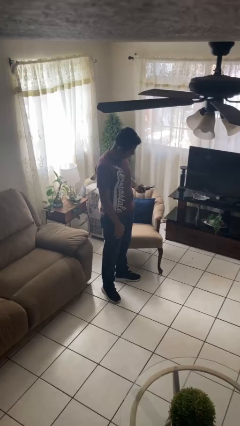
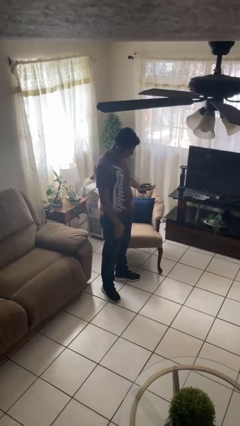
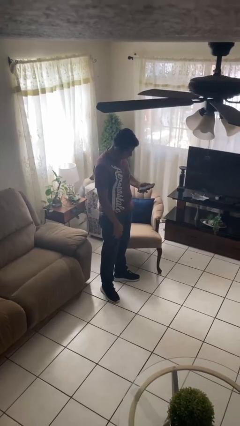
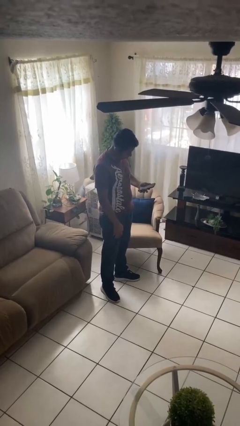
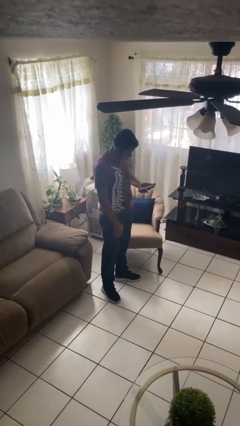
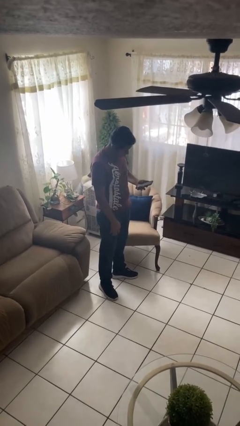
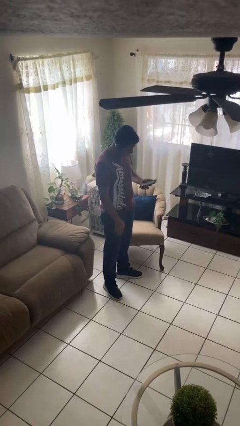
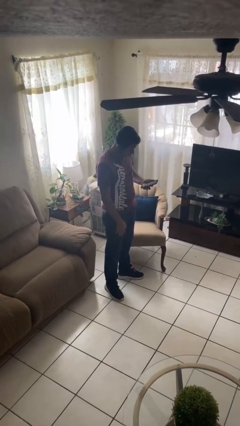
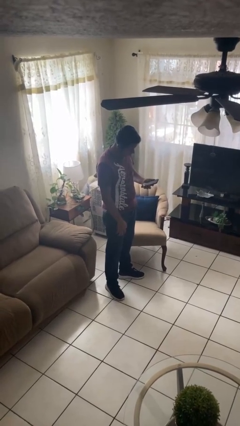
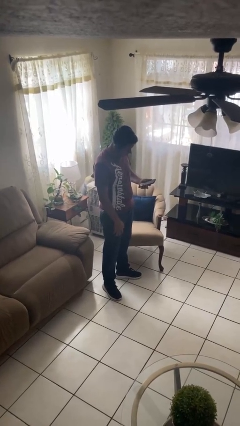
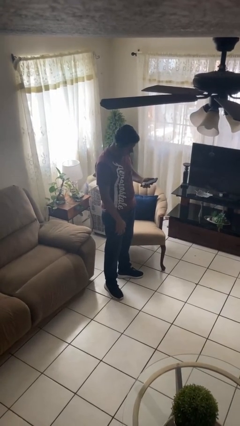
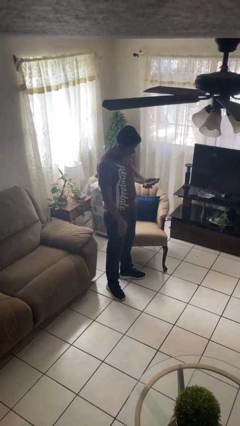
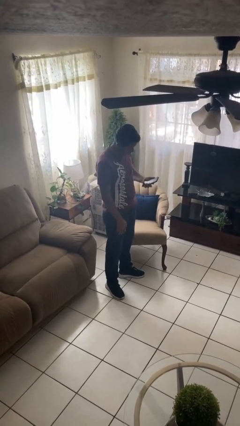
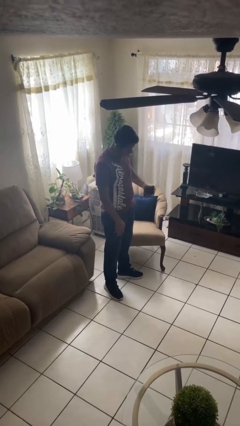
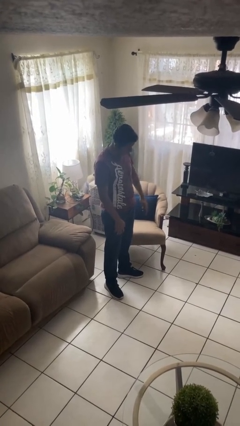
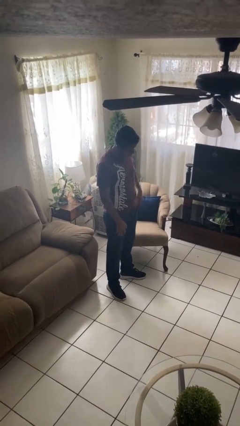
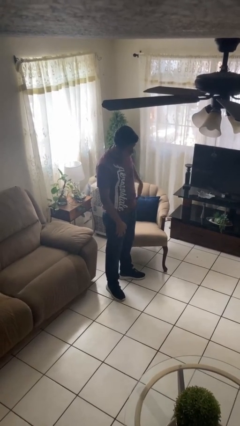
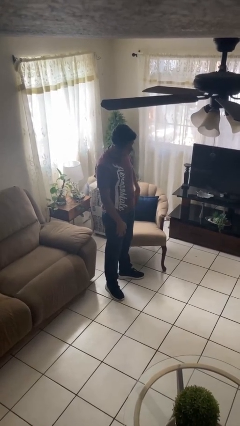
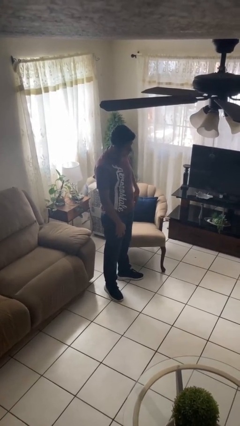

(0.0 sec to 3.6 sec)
person takes phone from pocket

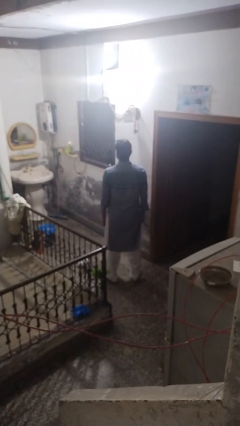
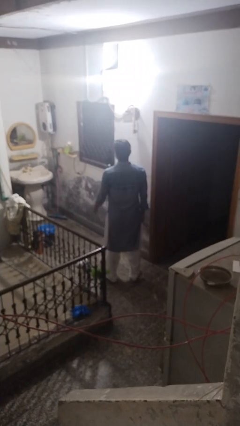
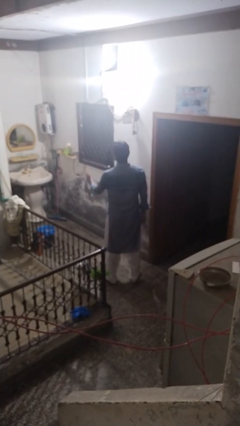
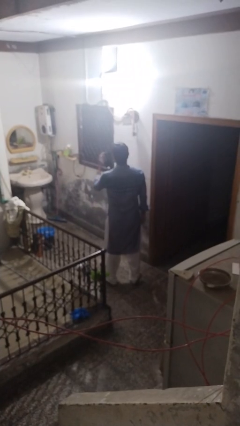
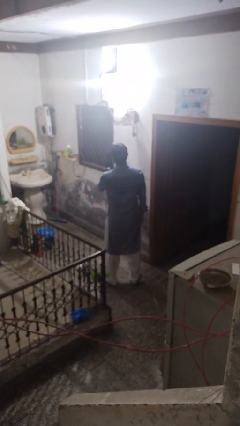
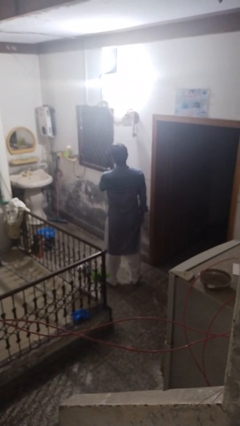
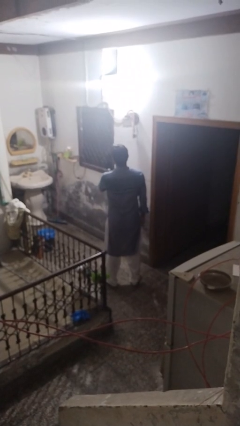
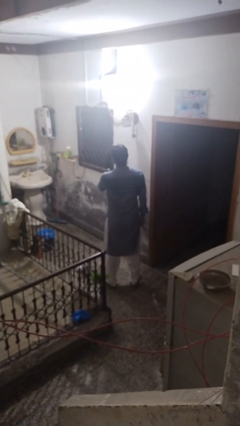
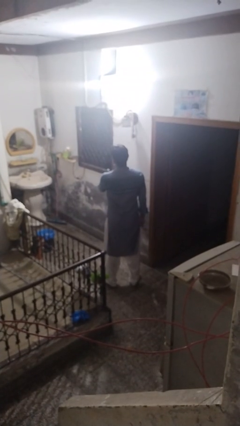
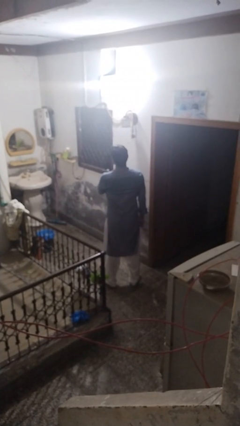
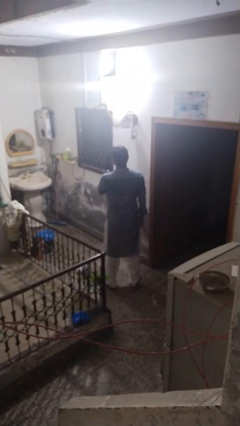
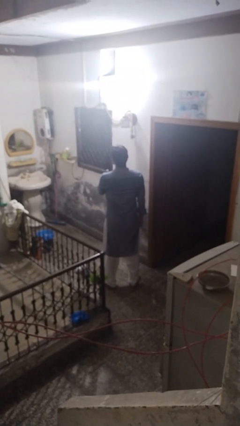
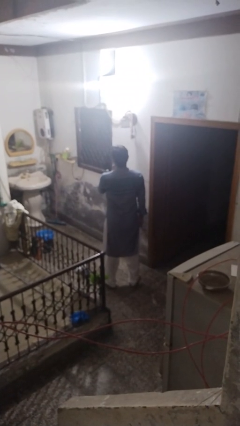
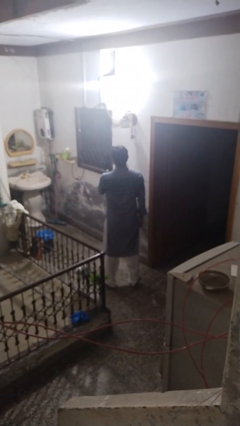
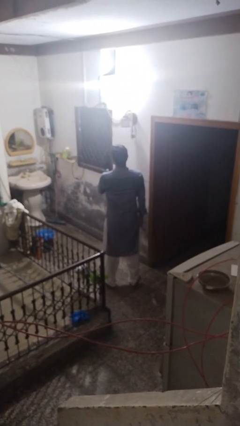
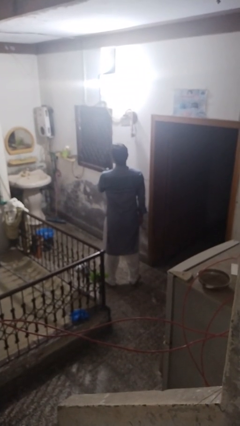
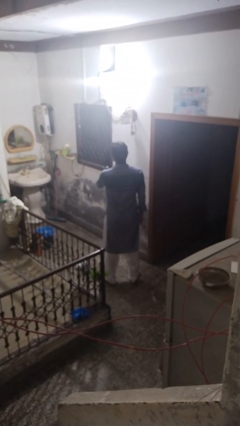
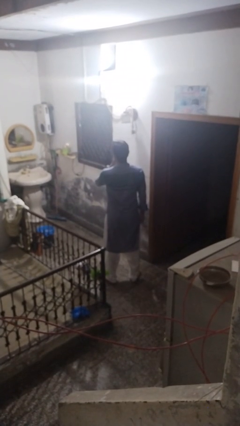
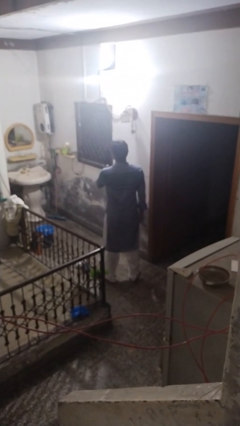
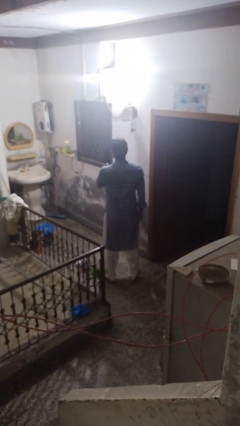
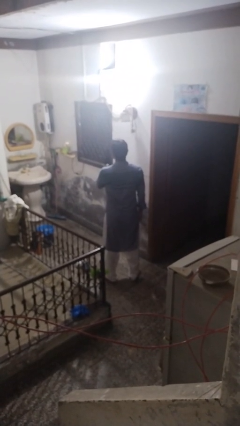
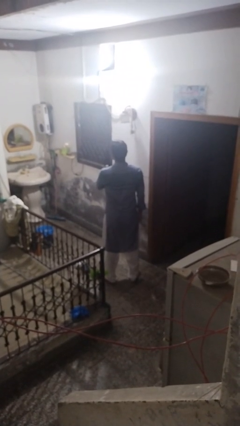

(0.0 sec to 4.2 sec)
person drums on chest

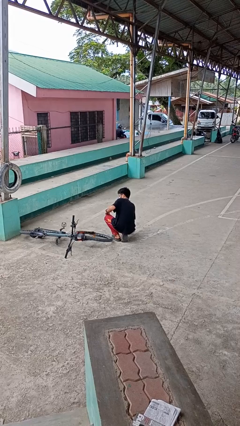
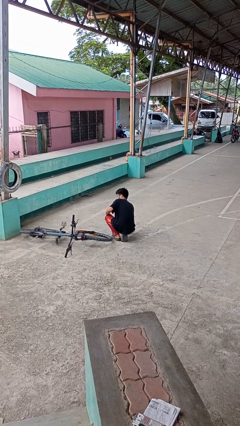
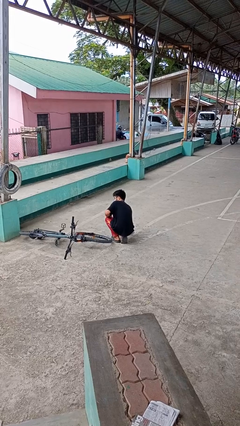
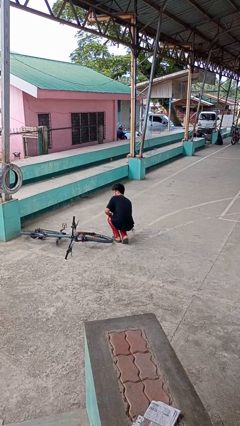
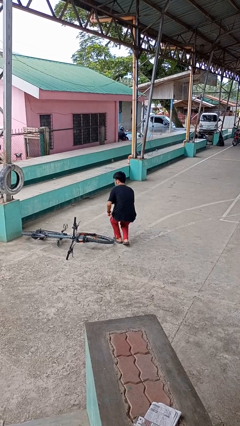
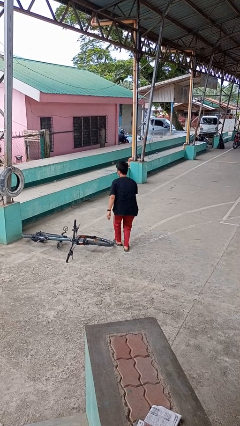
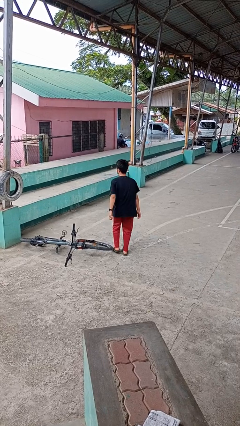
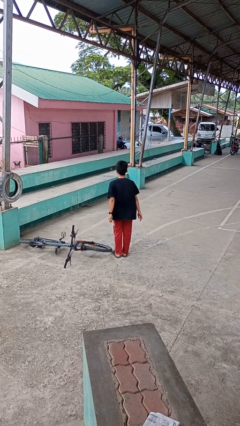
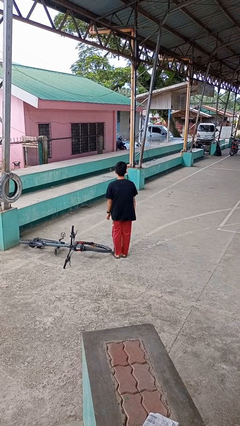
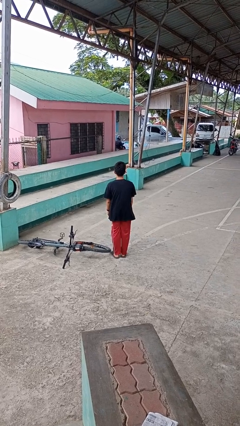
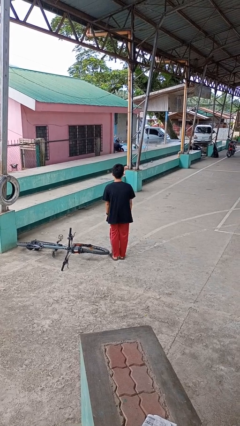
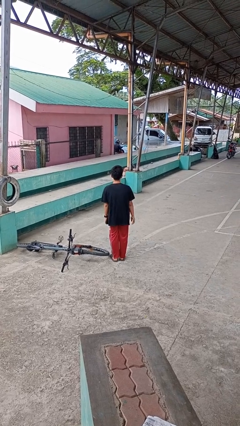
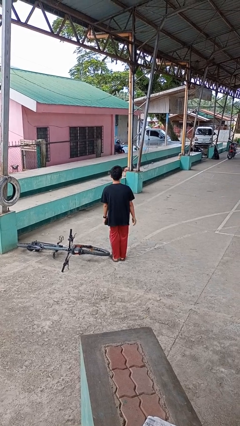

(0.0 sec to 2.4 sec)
person stands up from floor

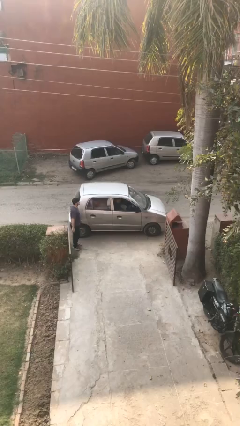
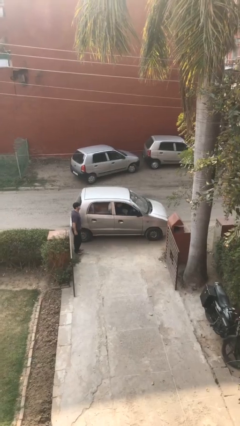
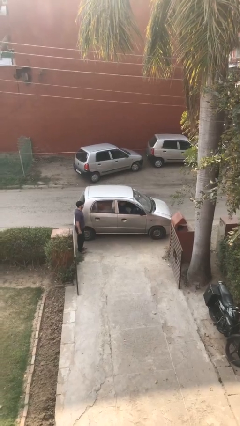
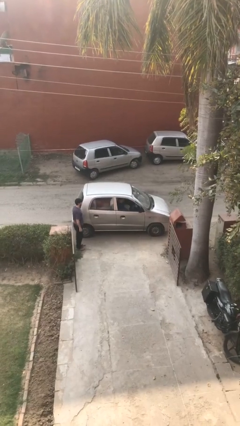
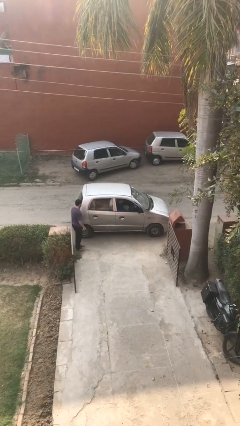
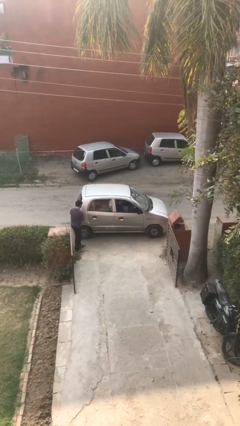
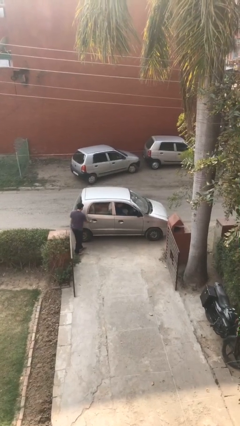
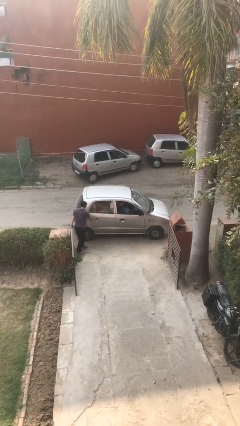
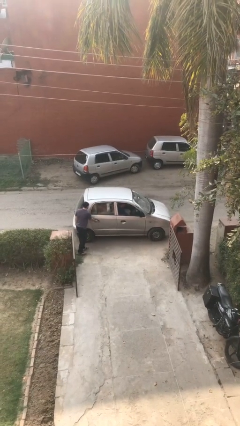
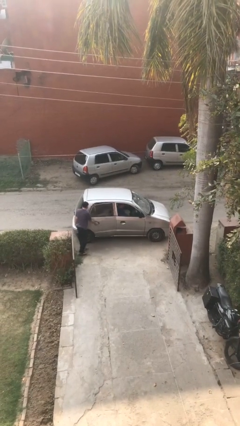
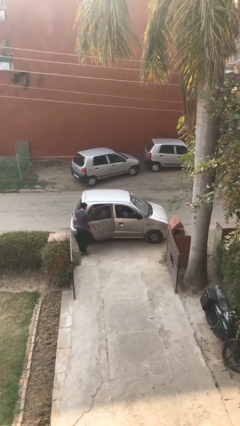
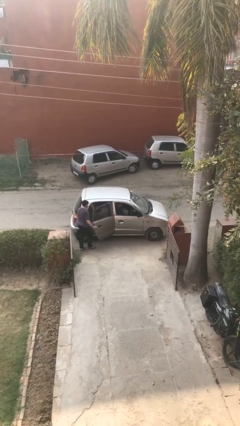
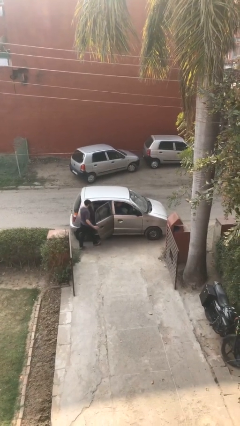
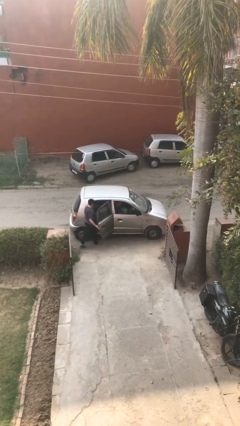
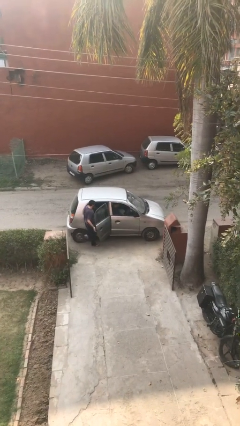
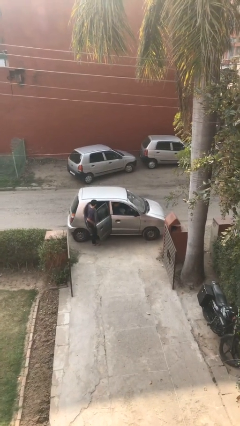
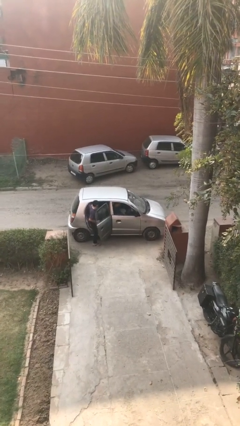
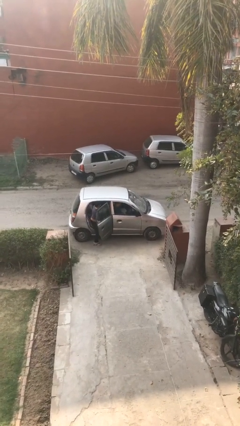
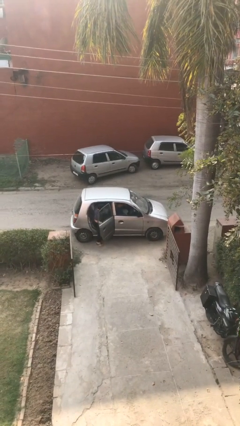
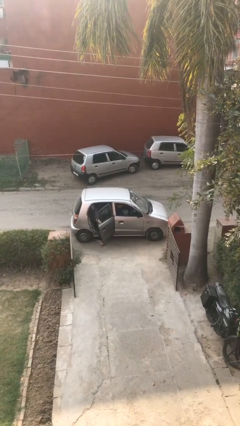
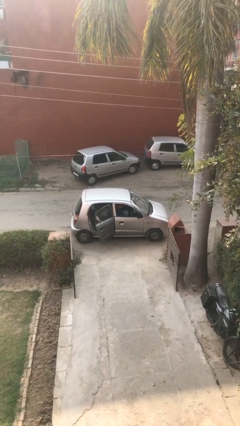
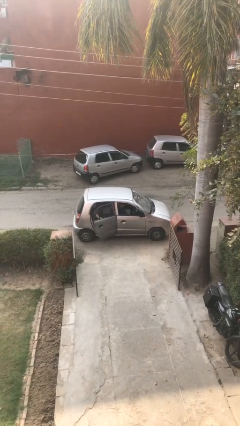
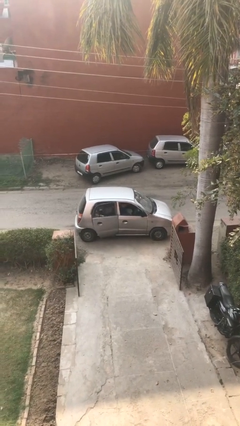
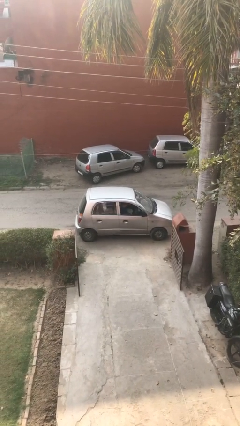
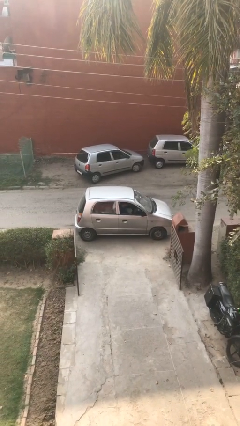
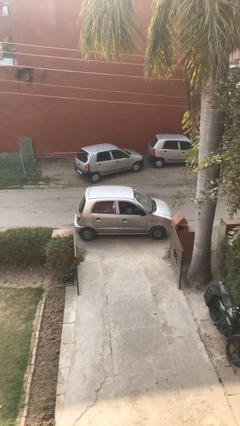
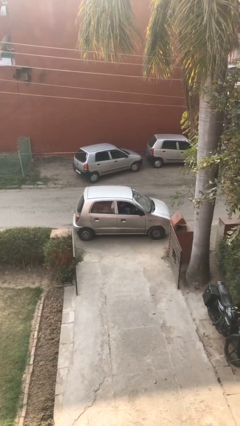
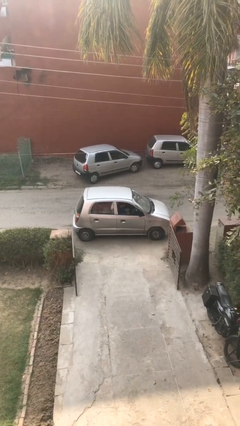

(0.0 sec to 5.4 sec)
car picks up person

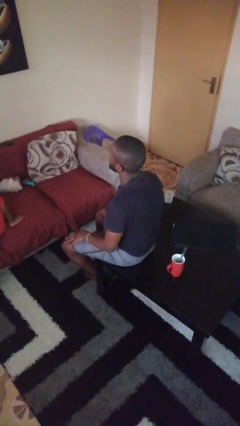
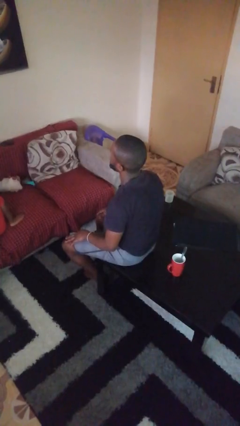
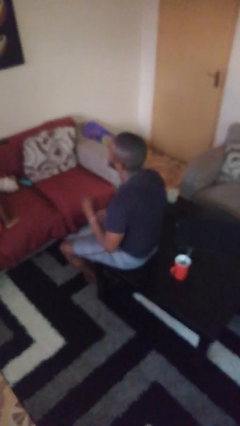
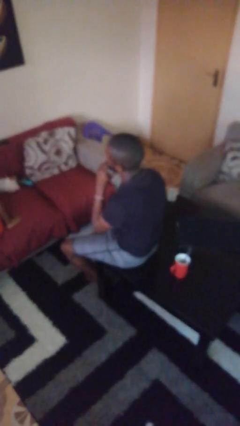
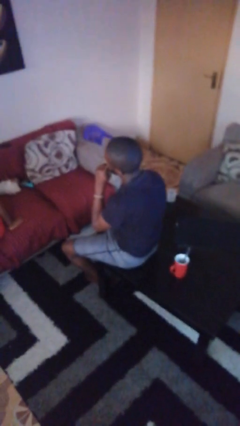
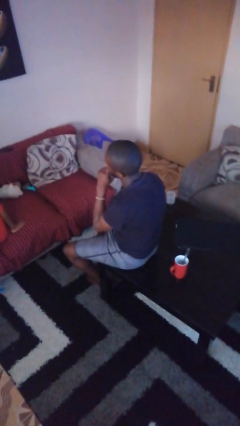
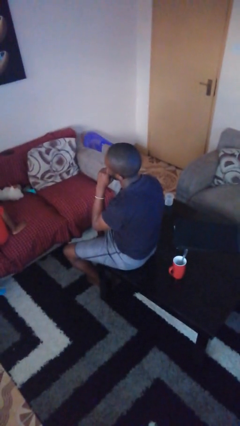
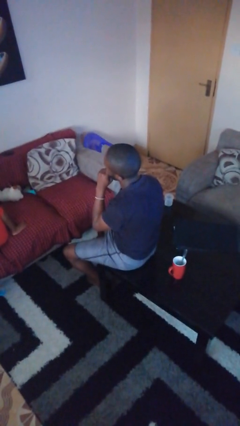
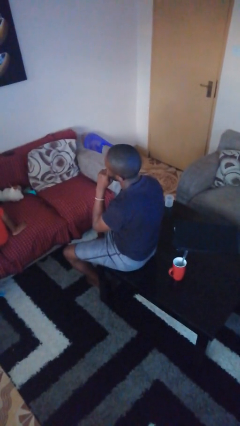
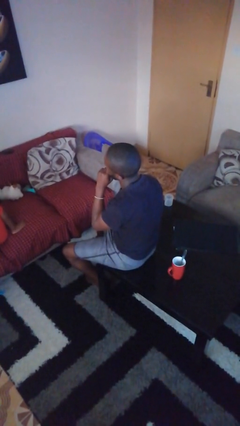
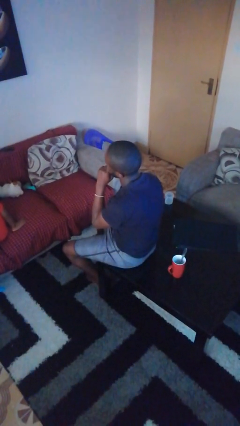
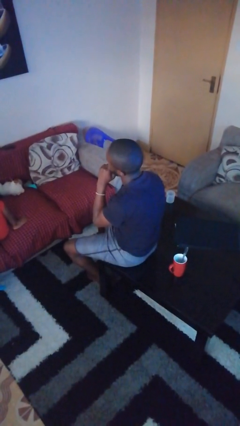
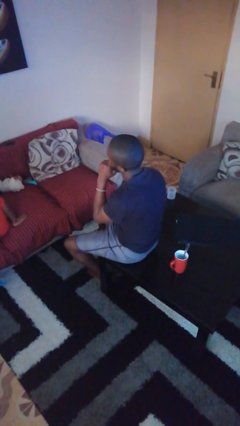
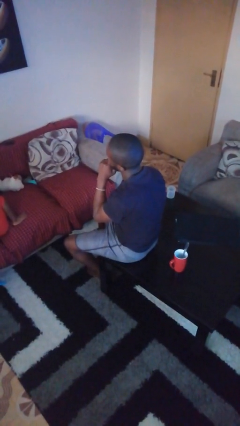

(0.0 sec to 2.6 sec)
person strokes chin
